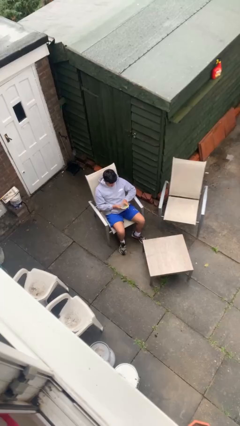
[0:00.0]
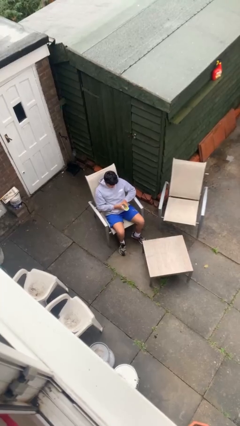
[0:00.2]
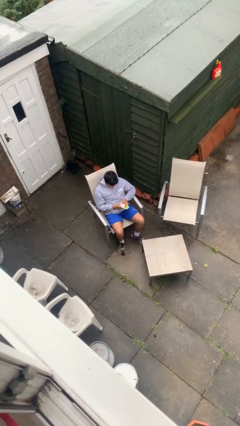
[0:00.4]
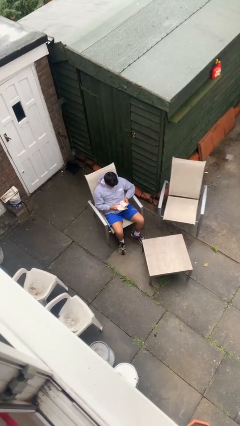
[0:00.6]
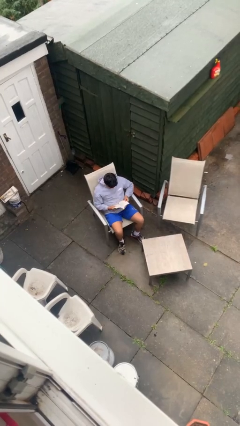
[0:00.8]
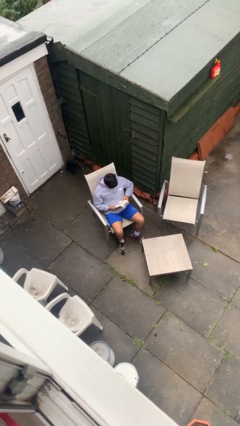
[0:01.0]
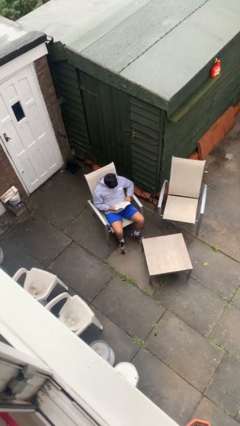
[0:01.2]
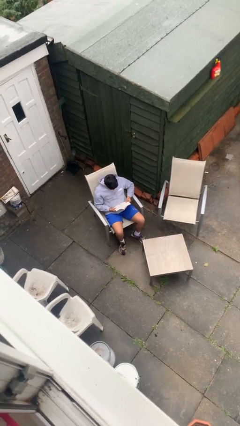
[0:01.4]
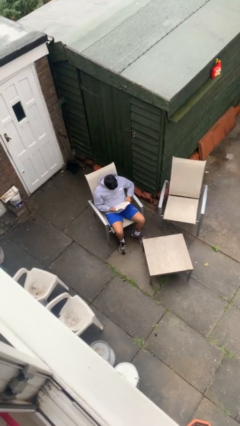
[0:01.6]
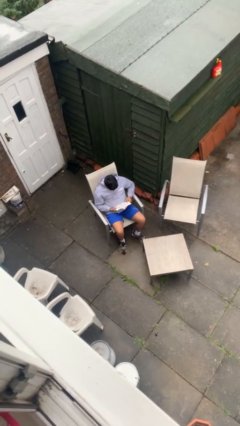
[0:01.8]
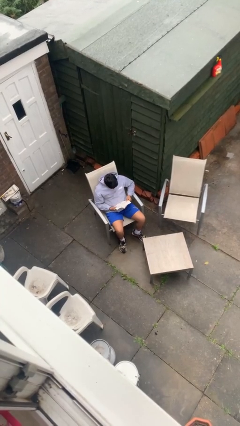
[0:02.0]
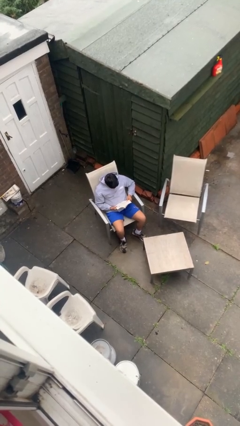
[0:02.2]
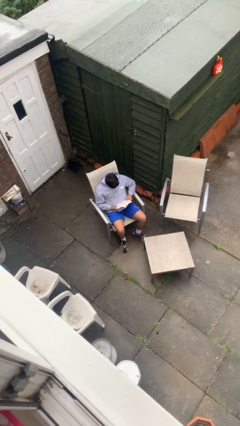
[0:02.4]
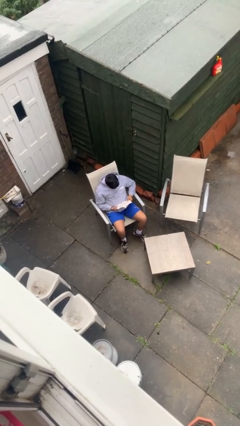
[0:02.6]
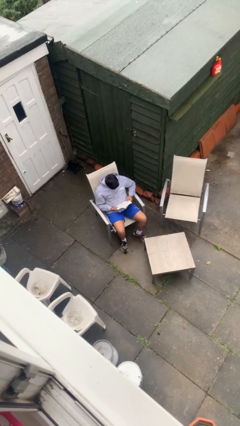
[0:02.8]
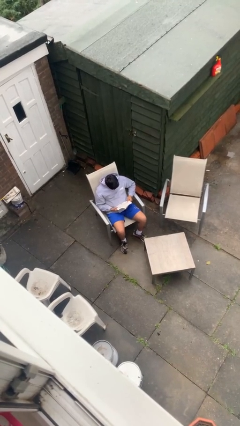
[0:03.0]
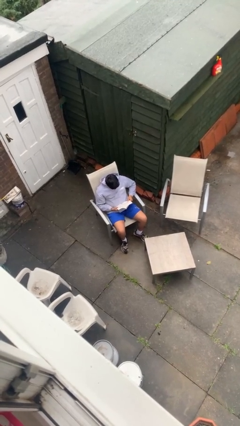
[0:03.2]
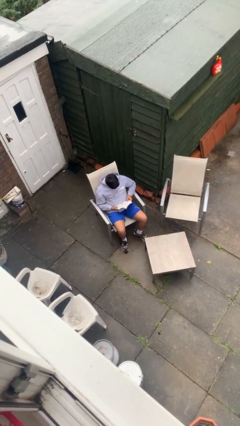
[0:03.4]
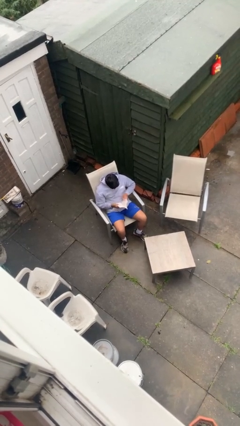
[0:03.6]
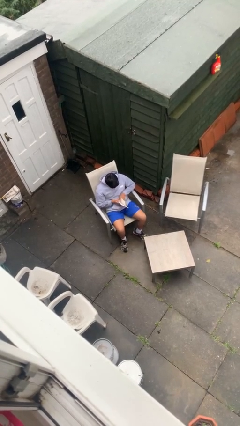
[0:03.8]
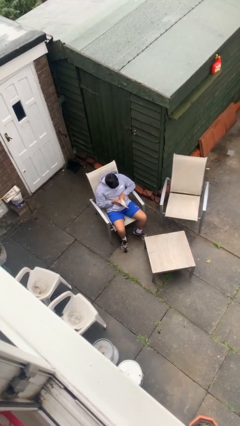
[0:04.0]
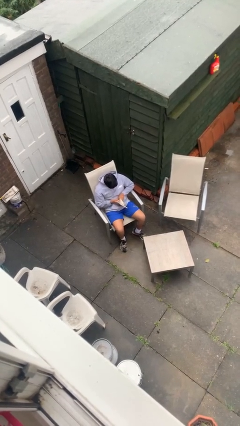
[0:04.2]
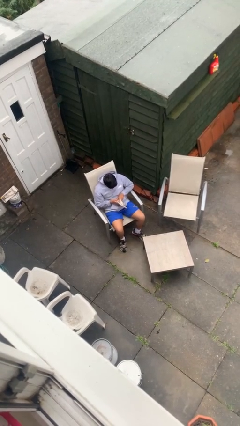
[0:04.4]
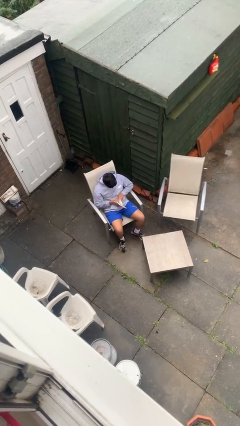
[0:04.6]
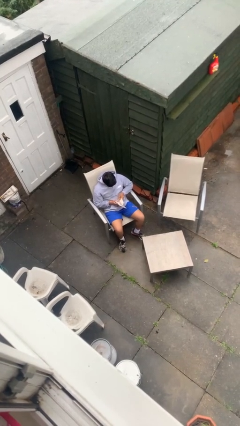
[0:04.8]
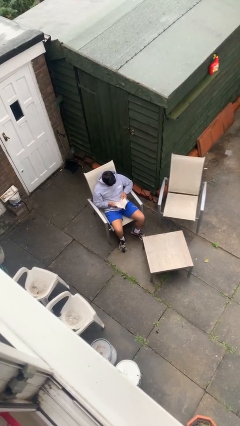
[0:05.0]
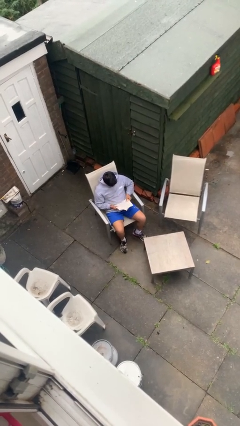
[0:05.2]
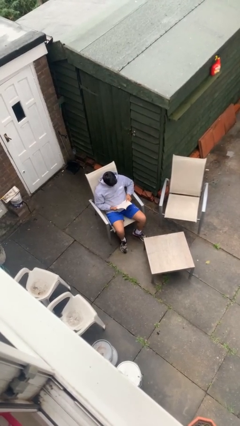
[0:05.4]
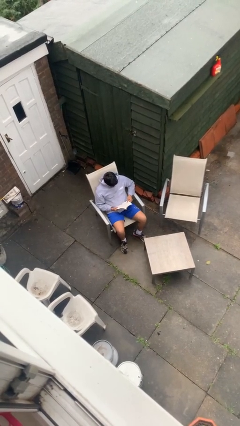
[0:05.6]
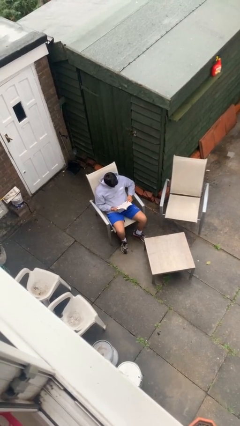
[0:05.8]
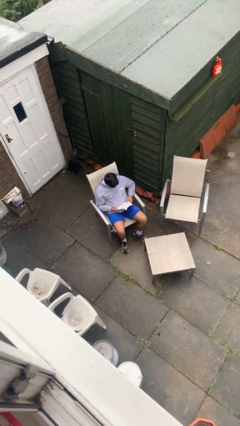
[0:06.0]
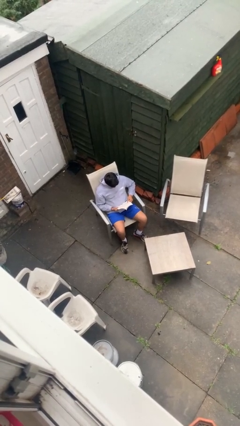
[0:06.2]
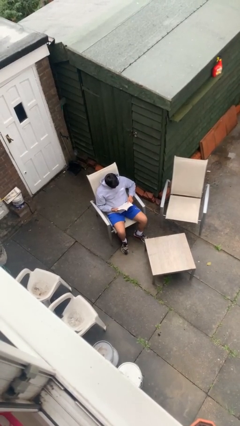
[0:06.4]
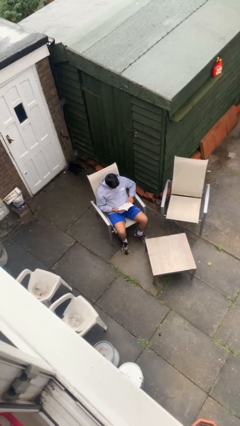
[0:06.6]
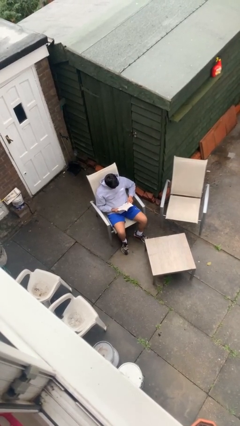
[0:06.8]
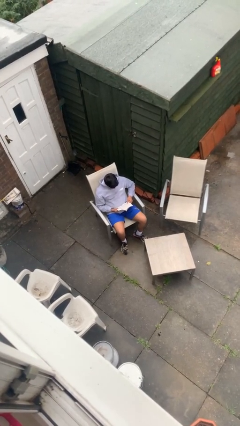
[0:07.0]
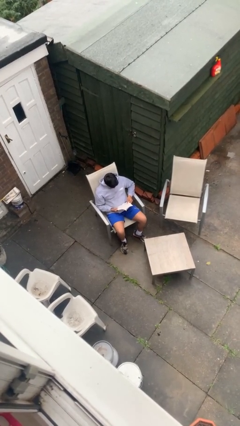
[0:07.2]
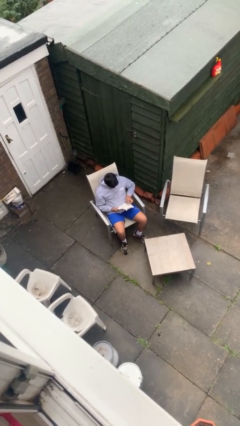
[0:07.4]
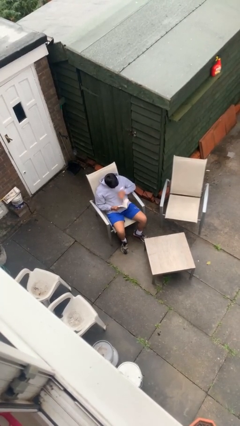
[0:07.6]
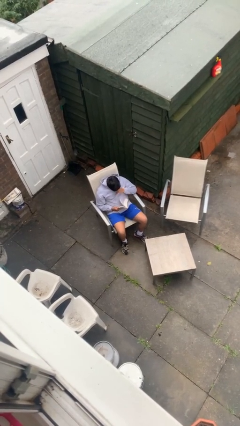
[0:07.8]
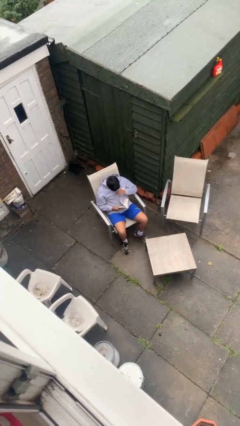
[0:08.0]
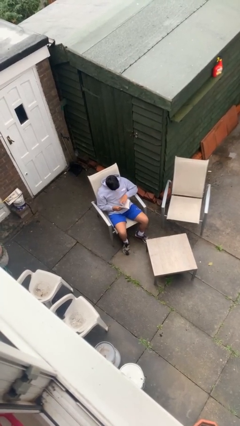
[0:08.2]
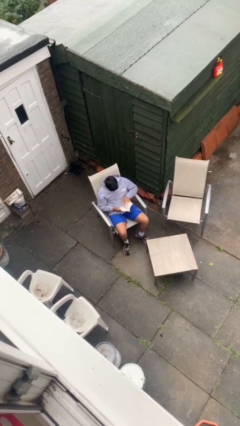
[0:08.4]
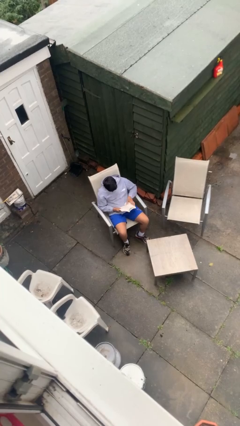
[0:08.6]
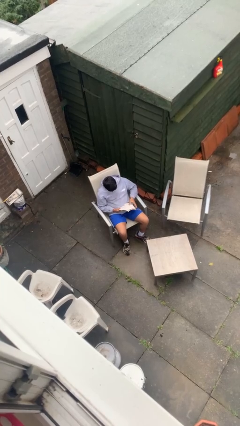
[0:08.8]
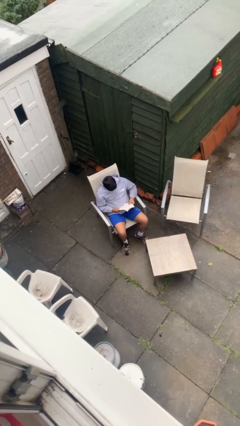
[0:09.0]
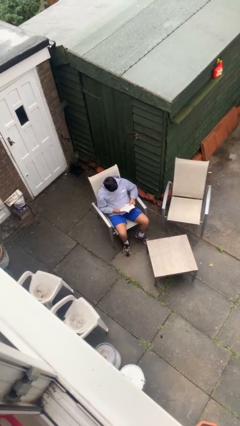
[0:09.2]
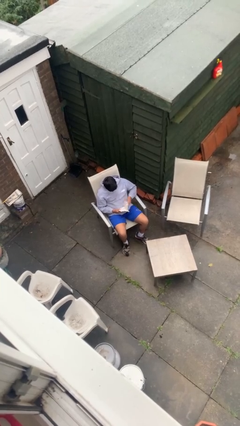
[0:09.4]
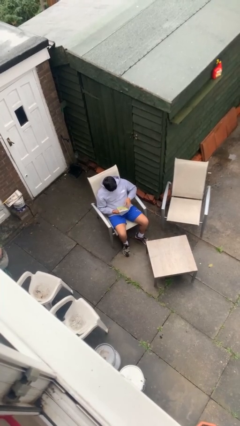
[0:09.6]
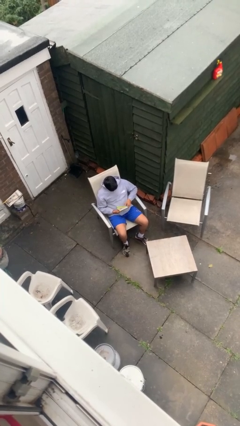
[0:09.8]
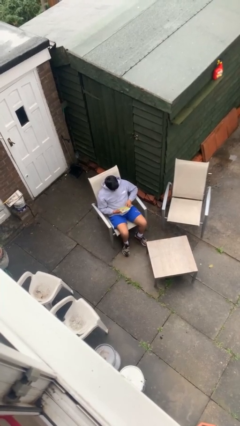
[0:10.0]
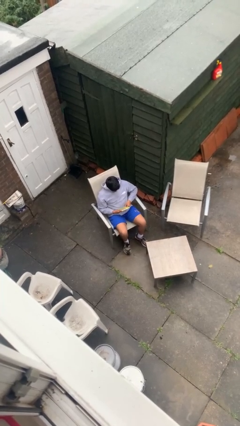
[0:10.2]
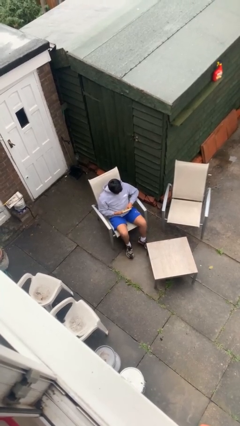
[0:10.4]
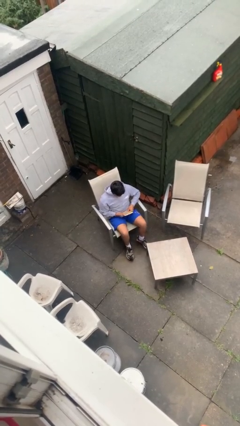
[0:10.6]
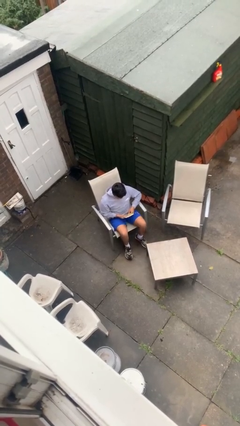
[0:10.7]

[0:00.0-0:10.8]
person reads document

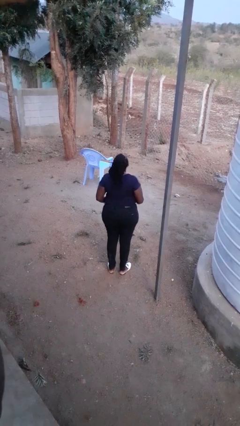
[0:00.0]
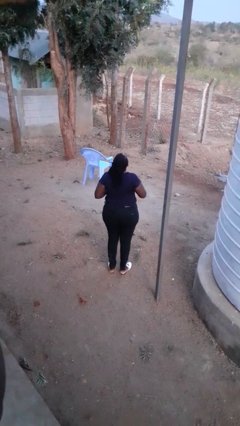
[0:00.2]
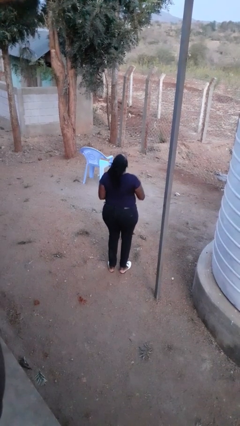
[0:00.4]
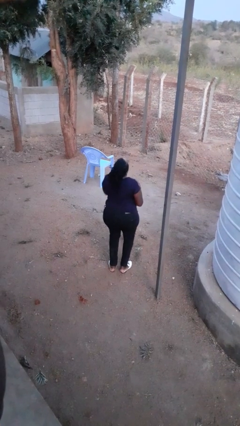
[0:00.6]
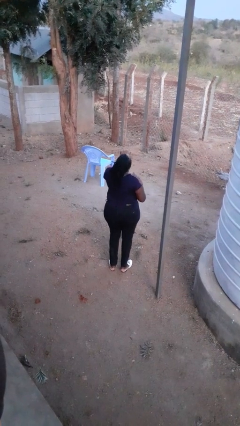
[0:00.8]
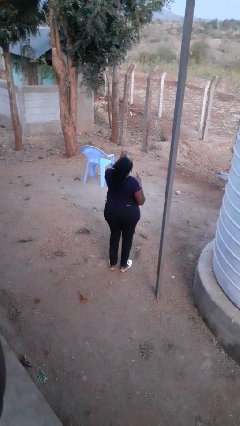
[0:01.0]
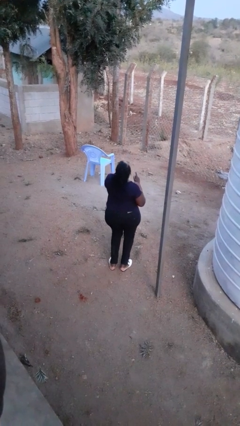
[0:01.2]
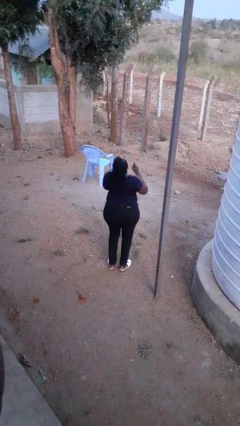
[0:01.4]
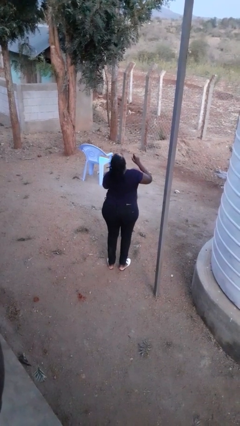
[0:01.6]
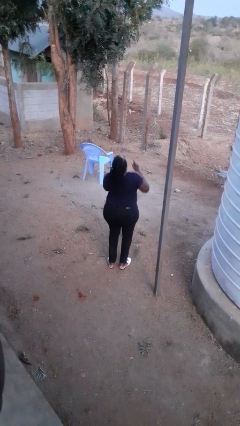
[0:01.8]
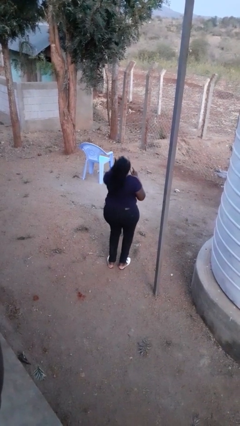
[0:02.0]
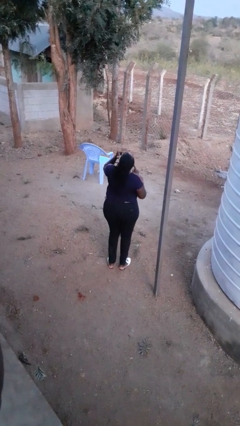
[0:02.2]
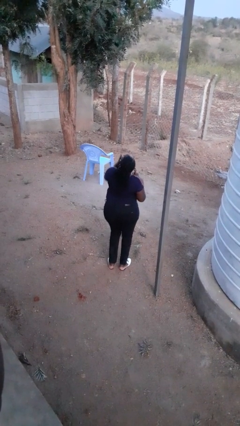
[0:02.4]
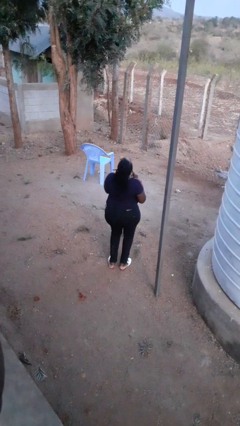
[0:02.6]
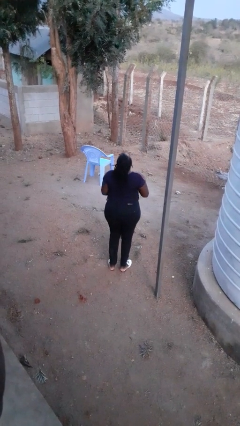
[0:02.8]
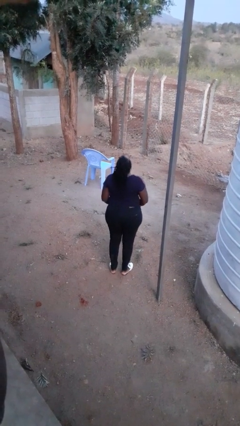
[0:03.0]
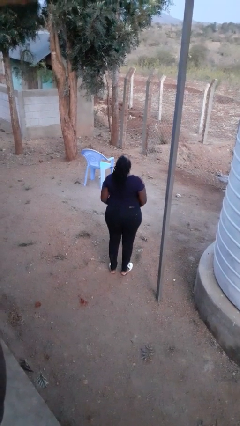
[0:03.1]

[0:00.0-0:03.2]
person dances in place

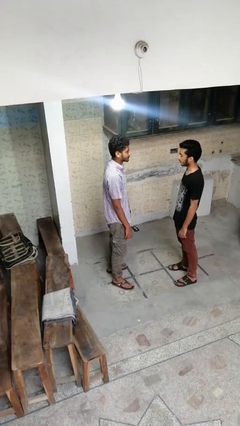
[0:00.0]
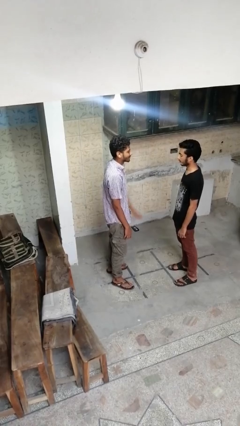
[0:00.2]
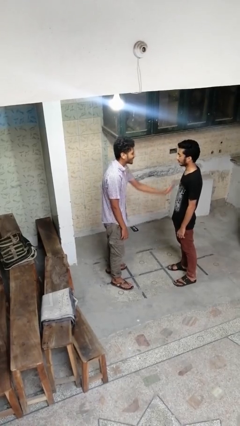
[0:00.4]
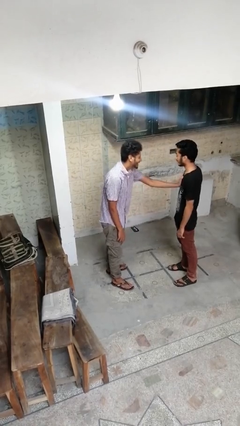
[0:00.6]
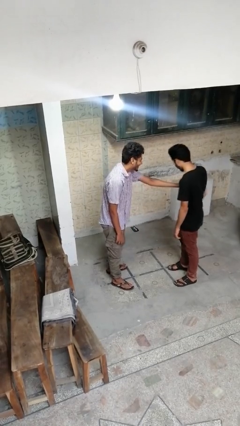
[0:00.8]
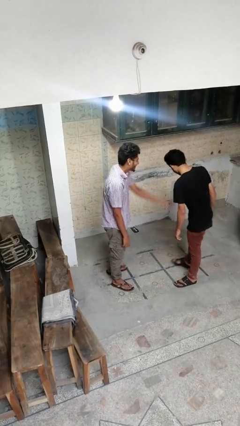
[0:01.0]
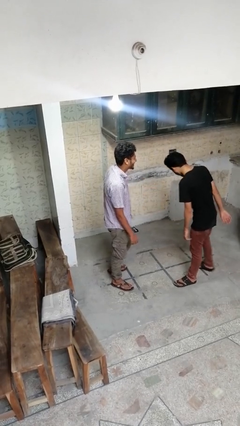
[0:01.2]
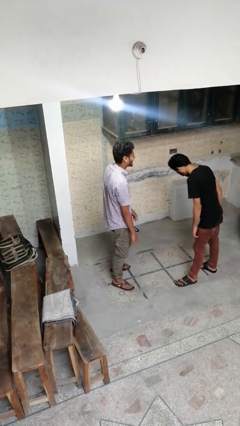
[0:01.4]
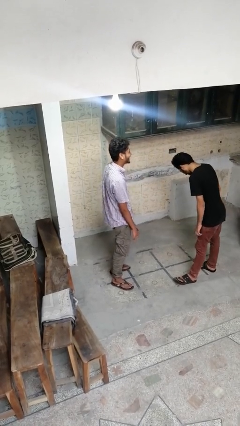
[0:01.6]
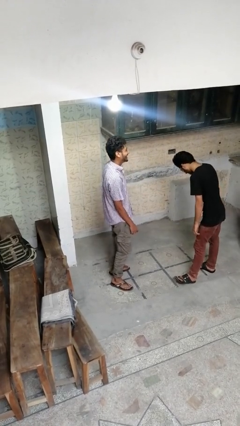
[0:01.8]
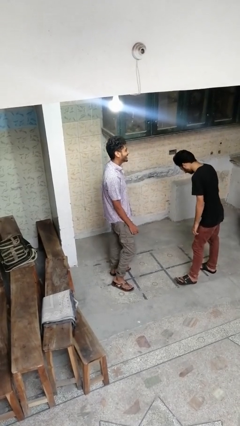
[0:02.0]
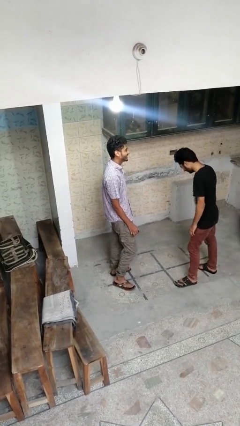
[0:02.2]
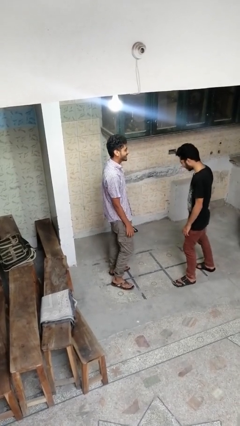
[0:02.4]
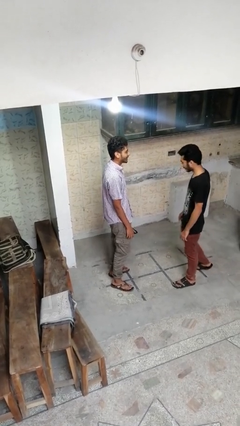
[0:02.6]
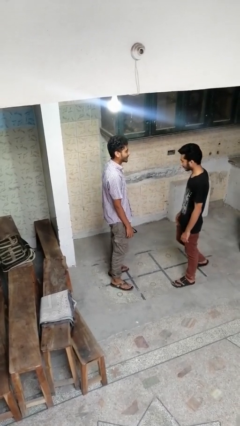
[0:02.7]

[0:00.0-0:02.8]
person shoves person

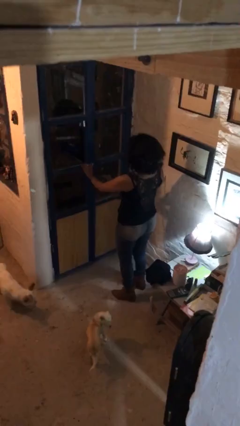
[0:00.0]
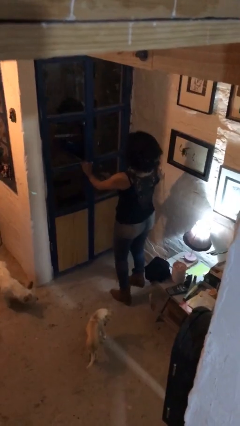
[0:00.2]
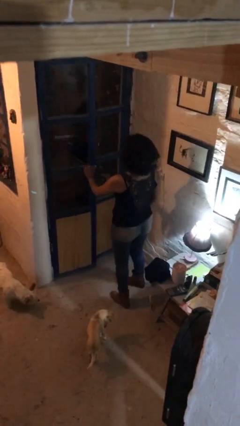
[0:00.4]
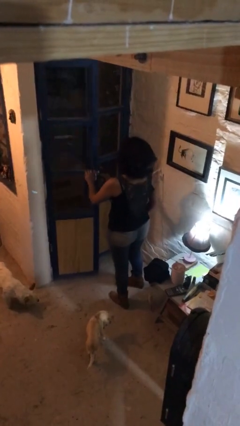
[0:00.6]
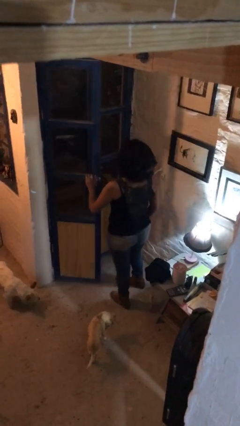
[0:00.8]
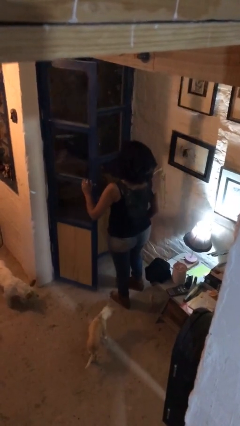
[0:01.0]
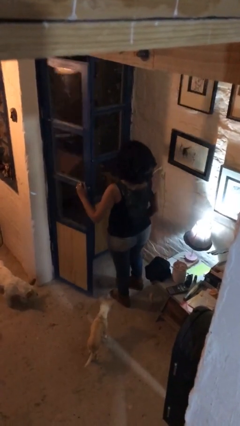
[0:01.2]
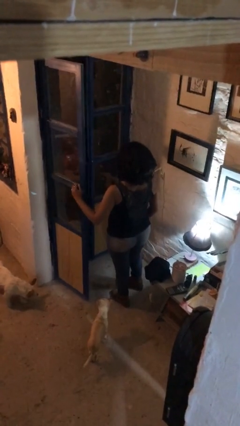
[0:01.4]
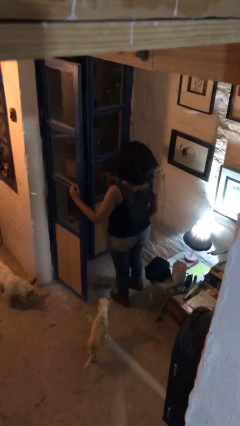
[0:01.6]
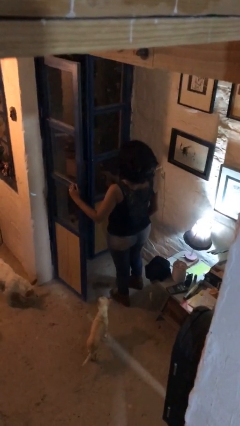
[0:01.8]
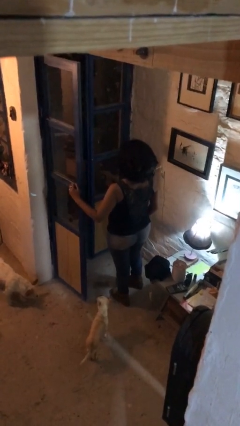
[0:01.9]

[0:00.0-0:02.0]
person opens facility door
